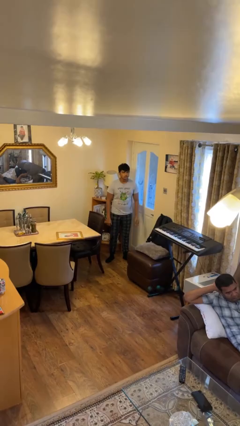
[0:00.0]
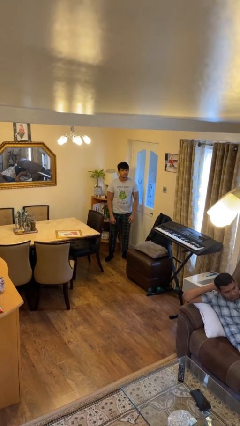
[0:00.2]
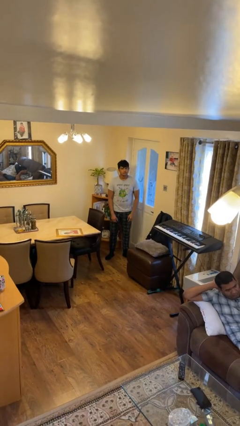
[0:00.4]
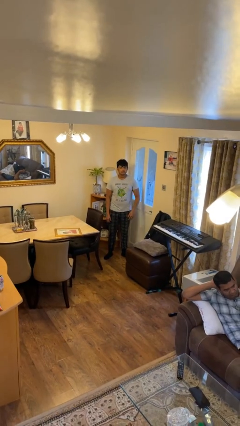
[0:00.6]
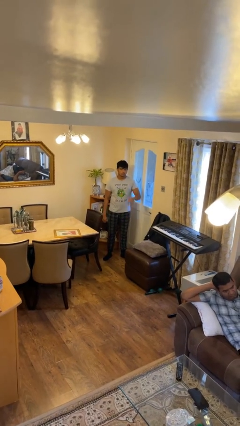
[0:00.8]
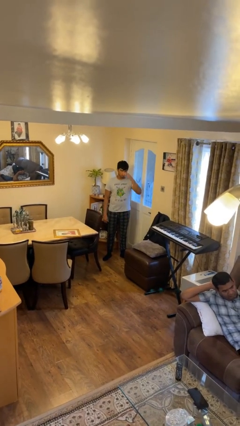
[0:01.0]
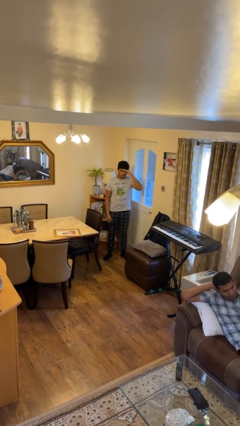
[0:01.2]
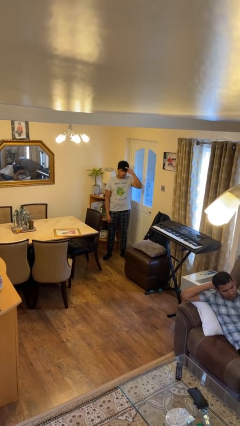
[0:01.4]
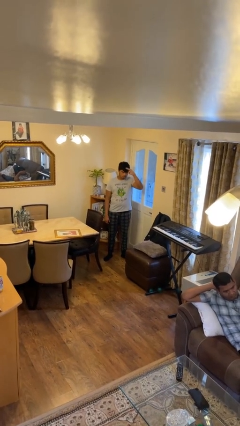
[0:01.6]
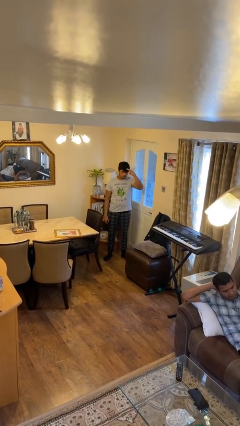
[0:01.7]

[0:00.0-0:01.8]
person salutes

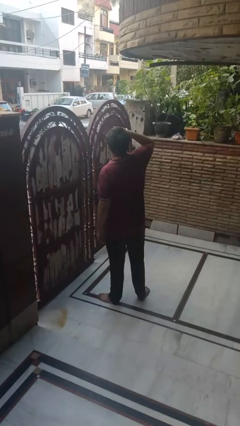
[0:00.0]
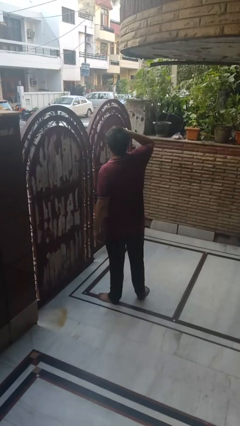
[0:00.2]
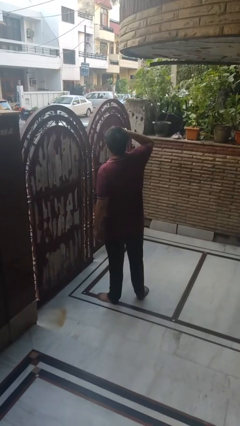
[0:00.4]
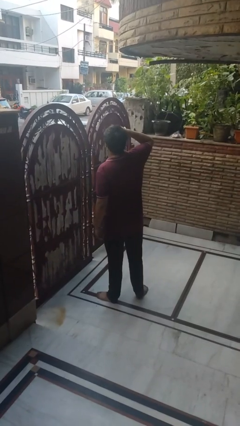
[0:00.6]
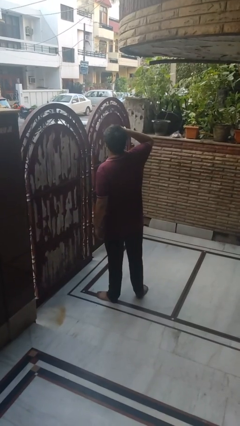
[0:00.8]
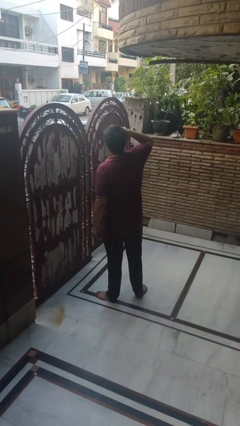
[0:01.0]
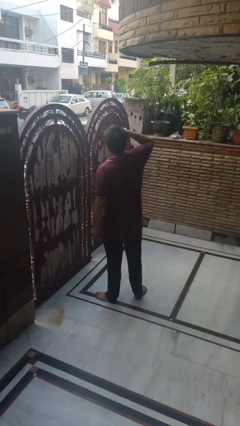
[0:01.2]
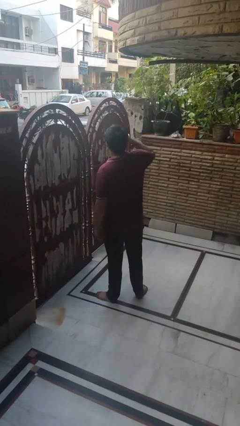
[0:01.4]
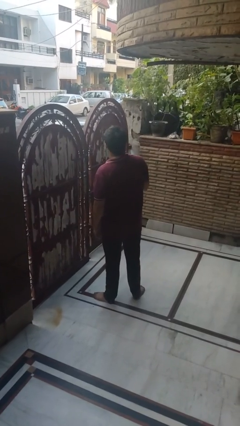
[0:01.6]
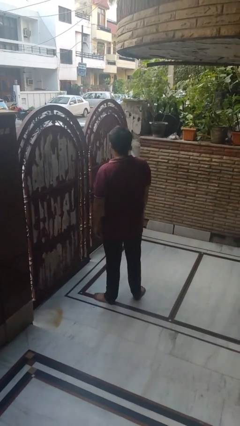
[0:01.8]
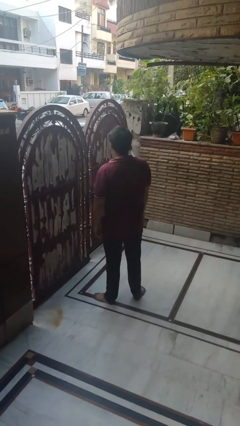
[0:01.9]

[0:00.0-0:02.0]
person shades eyes

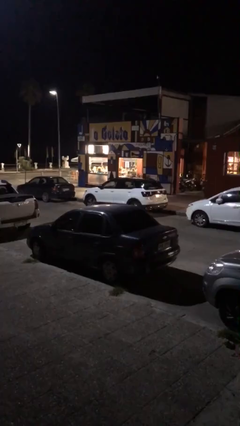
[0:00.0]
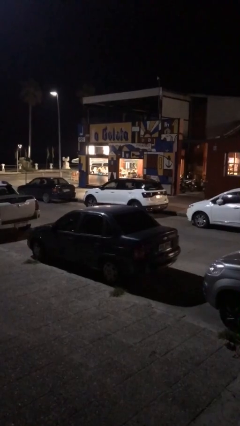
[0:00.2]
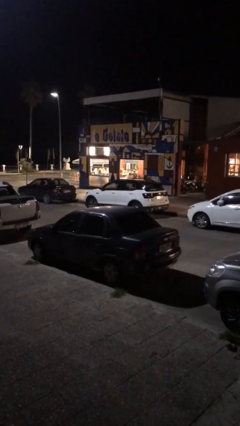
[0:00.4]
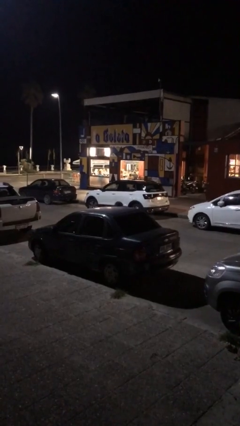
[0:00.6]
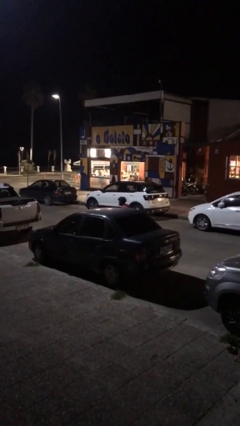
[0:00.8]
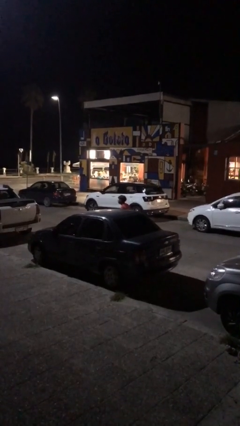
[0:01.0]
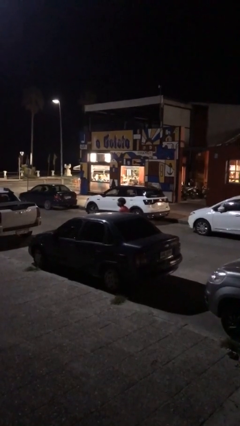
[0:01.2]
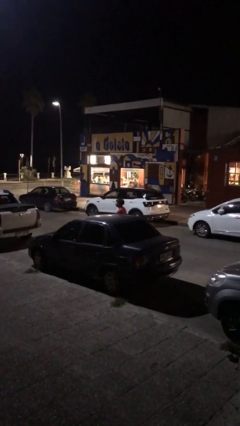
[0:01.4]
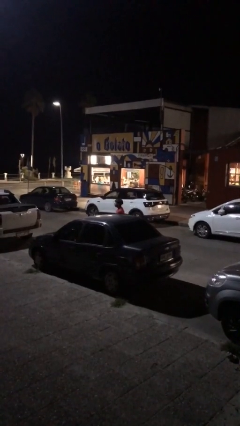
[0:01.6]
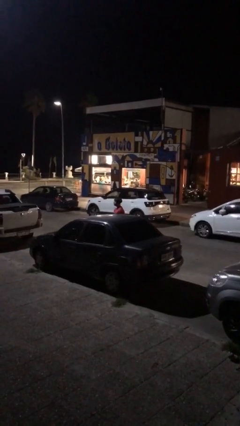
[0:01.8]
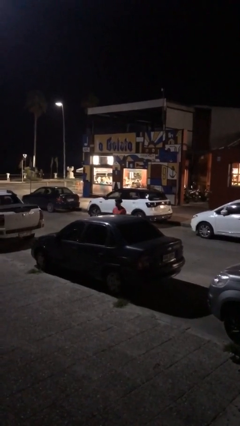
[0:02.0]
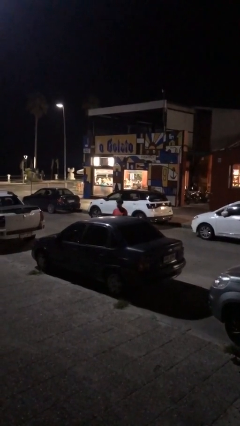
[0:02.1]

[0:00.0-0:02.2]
person exits car

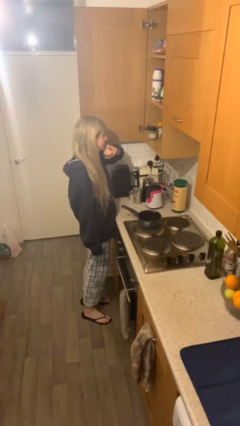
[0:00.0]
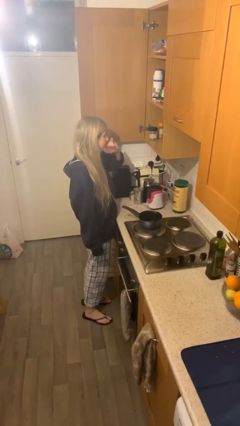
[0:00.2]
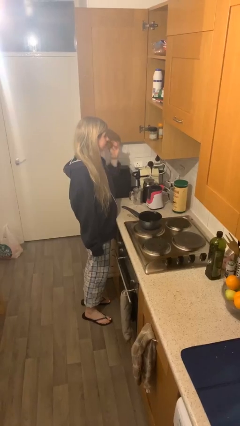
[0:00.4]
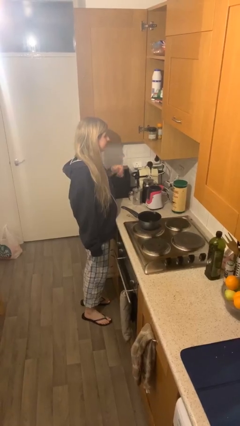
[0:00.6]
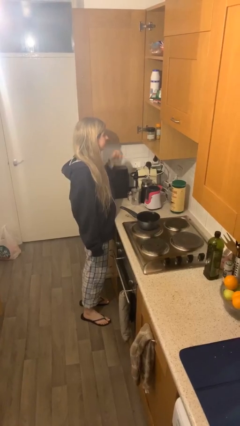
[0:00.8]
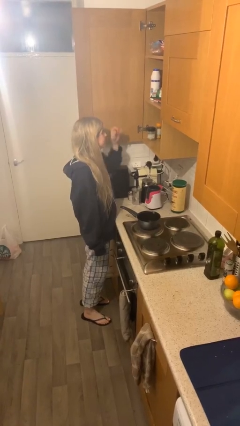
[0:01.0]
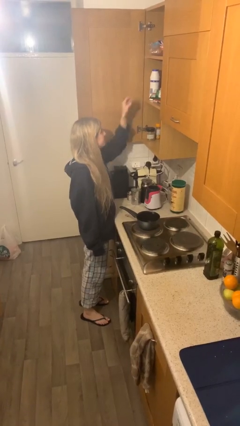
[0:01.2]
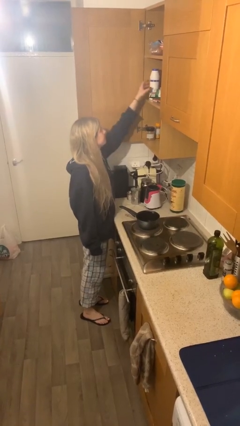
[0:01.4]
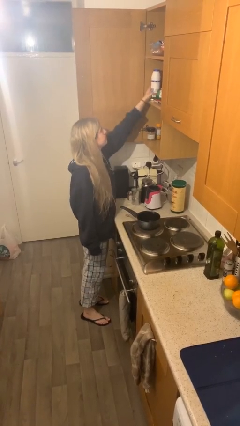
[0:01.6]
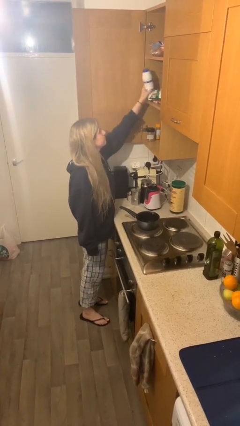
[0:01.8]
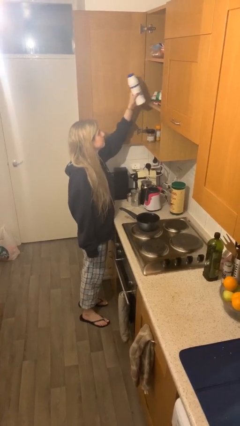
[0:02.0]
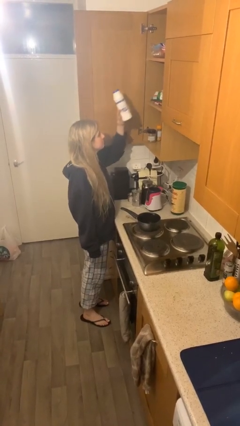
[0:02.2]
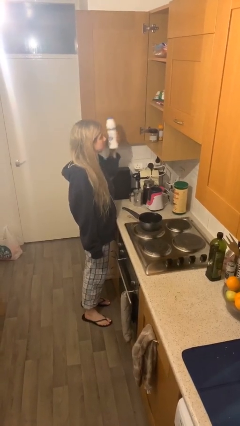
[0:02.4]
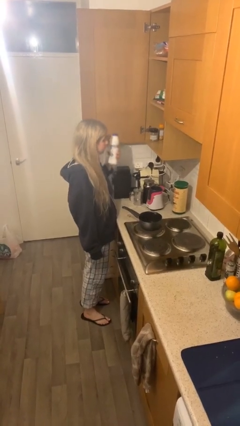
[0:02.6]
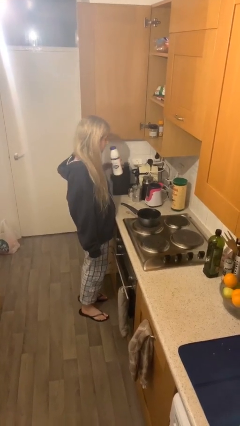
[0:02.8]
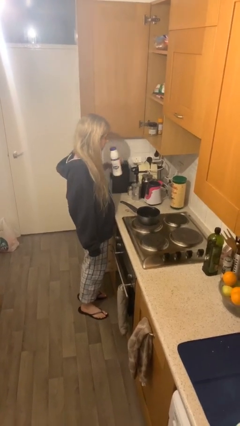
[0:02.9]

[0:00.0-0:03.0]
person picks up object from shelf

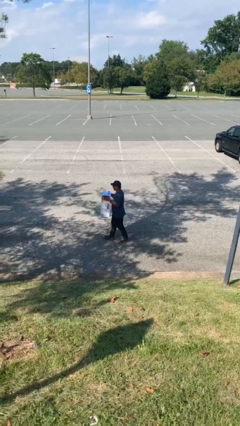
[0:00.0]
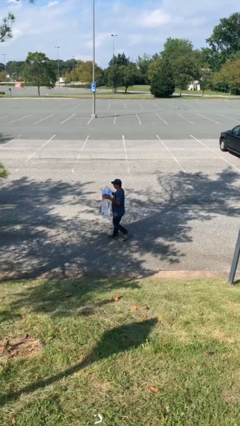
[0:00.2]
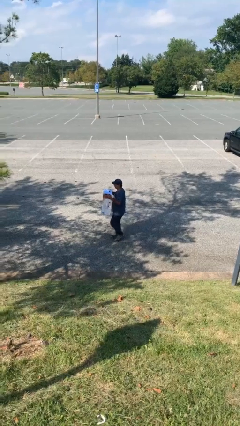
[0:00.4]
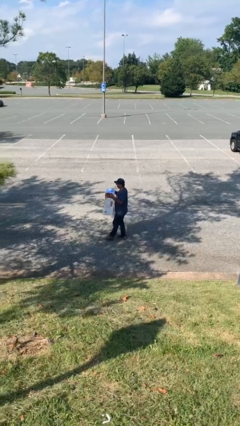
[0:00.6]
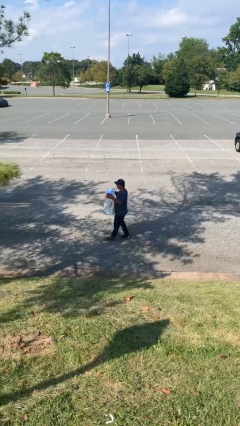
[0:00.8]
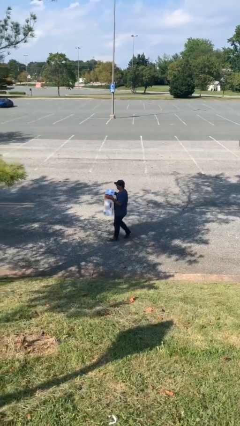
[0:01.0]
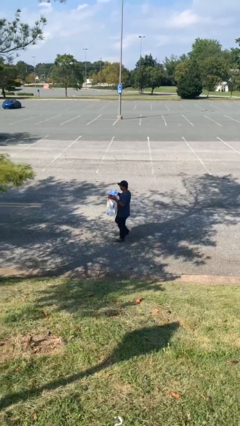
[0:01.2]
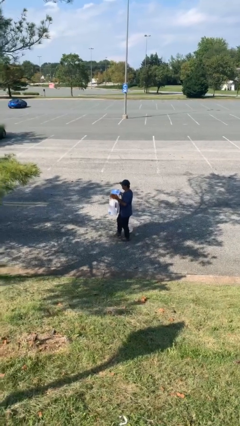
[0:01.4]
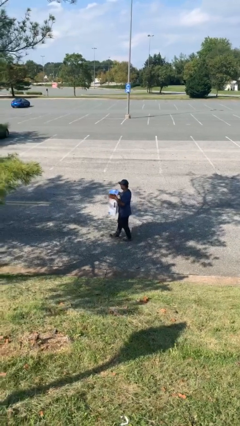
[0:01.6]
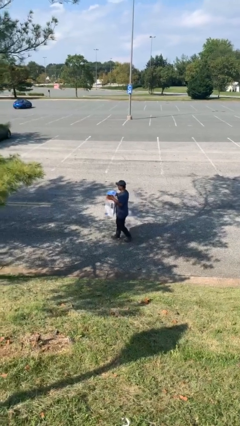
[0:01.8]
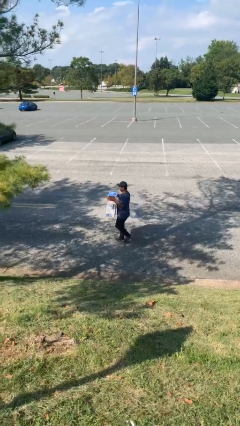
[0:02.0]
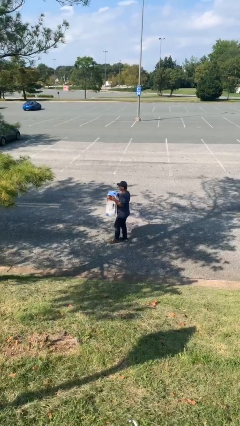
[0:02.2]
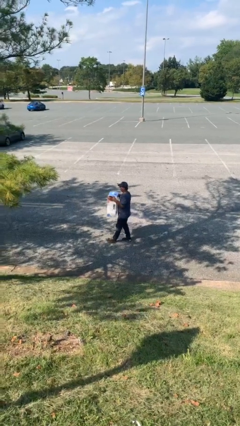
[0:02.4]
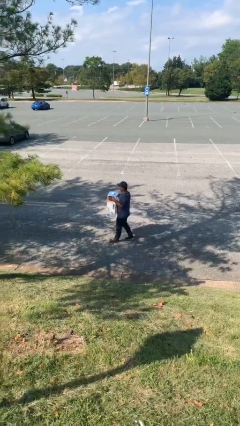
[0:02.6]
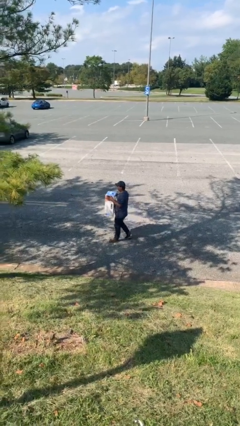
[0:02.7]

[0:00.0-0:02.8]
person carries heavy object

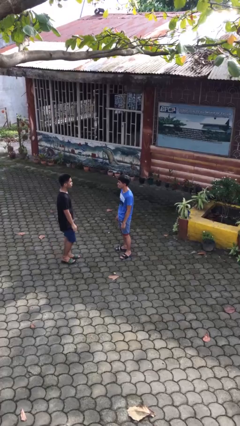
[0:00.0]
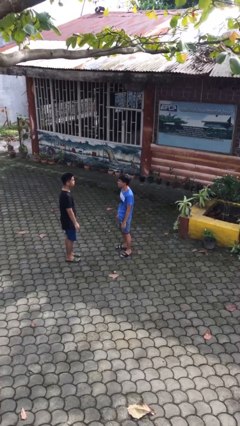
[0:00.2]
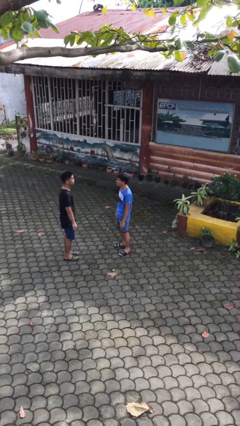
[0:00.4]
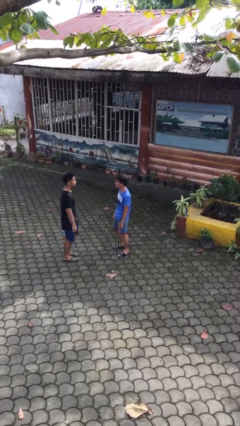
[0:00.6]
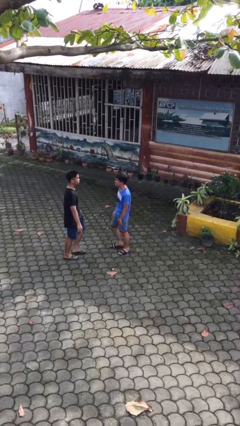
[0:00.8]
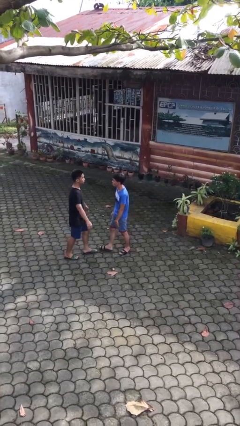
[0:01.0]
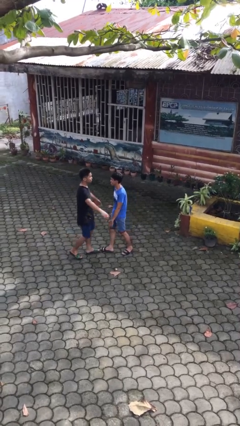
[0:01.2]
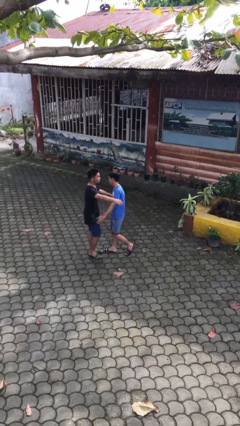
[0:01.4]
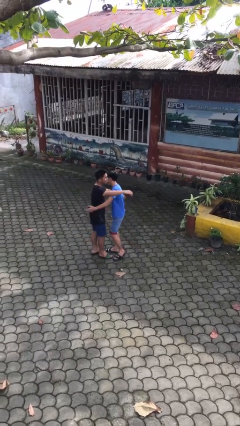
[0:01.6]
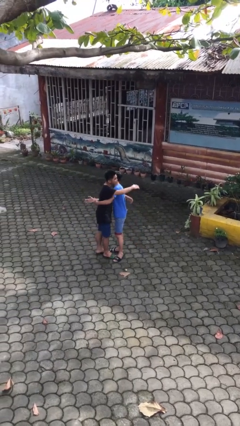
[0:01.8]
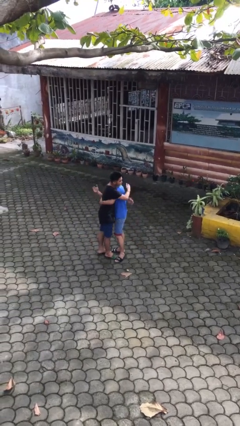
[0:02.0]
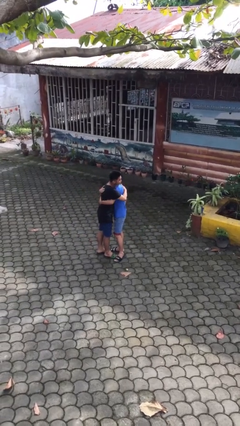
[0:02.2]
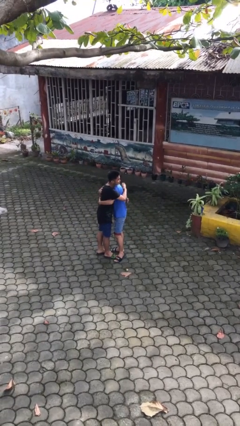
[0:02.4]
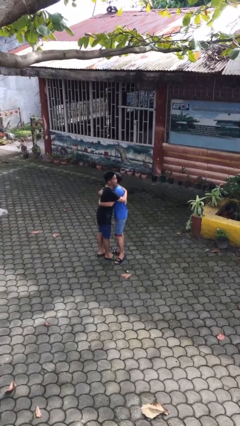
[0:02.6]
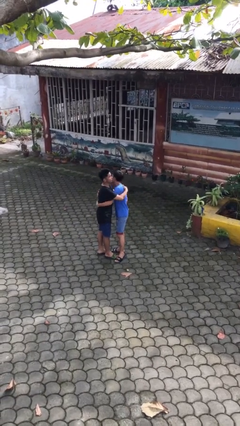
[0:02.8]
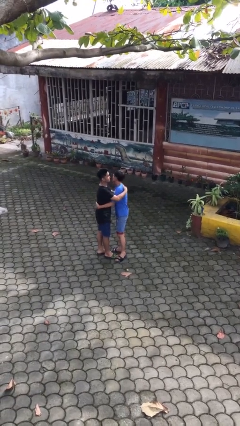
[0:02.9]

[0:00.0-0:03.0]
person embraces person

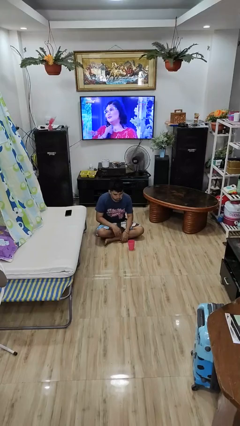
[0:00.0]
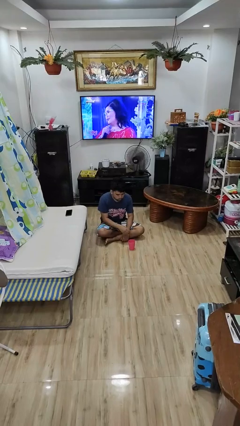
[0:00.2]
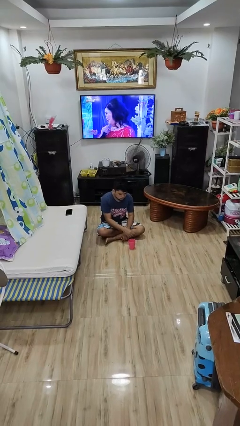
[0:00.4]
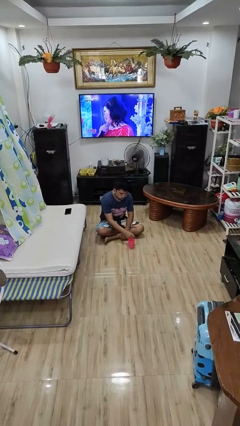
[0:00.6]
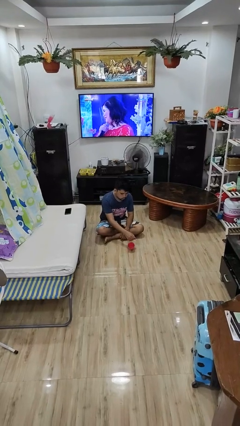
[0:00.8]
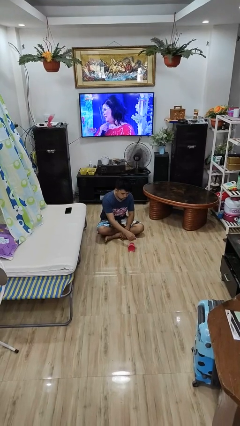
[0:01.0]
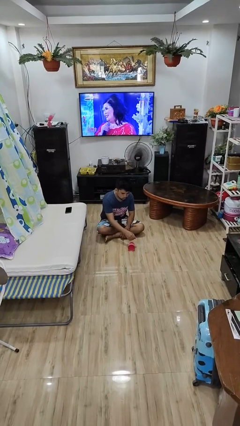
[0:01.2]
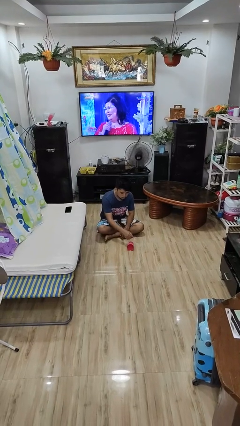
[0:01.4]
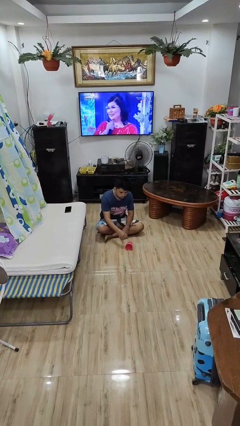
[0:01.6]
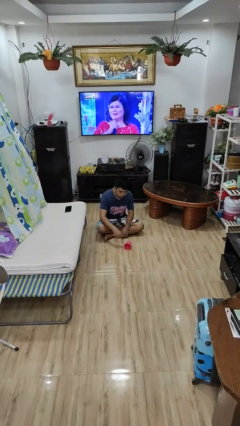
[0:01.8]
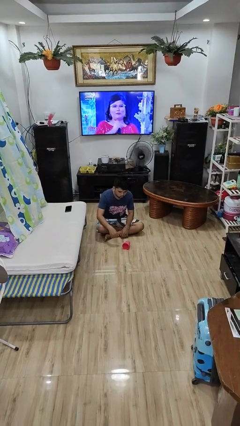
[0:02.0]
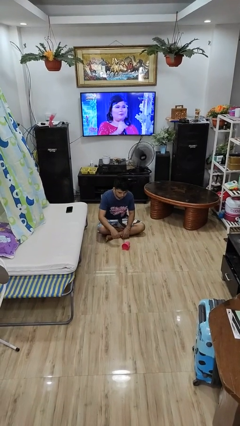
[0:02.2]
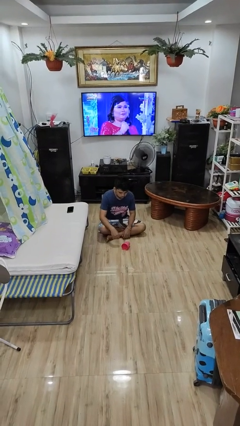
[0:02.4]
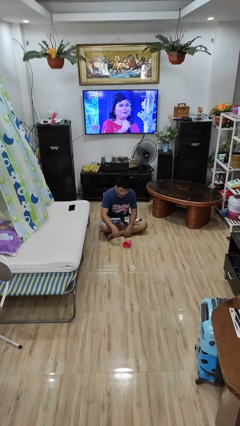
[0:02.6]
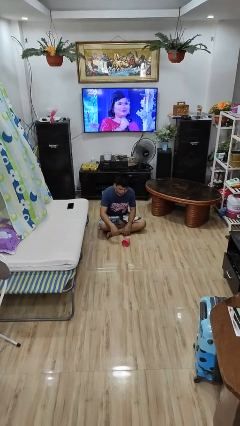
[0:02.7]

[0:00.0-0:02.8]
person spills on floor
